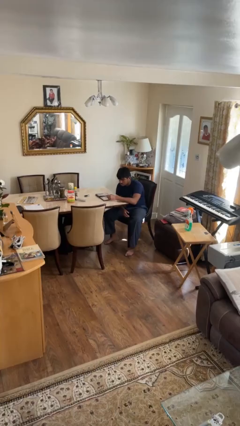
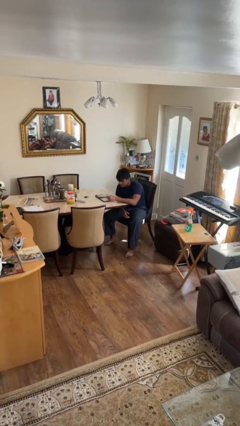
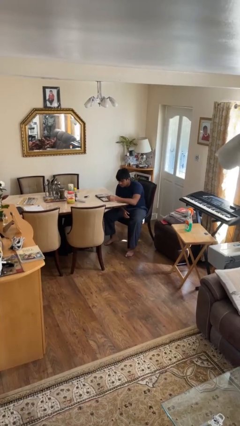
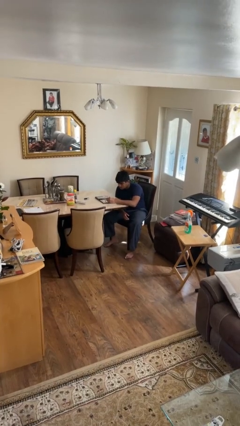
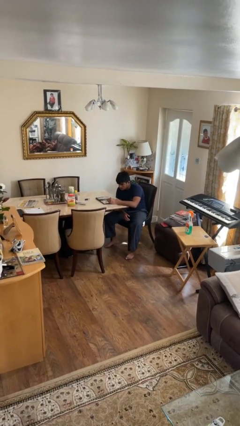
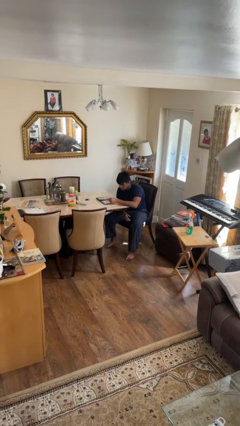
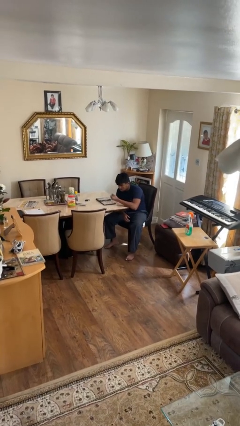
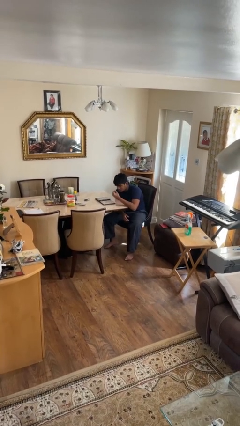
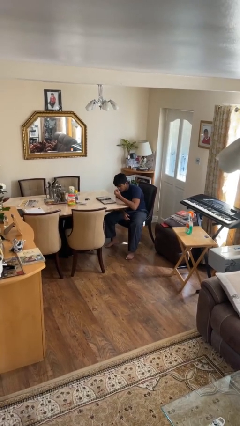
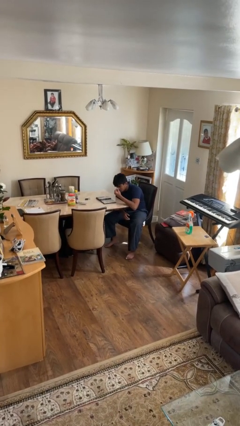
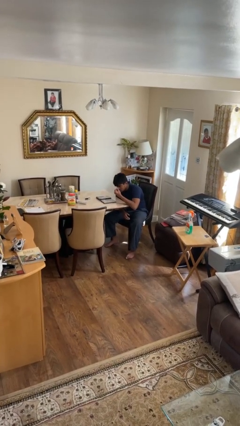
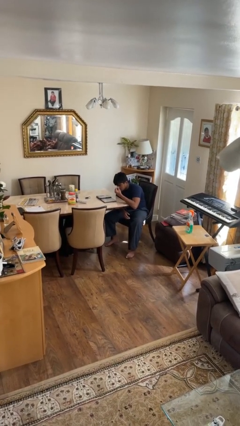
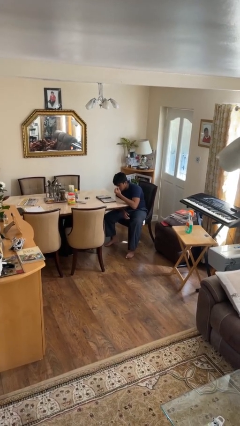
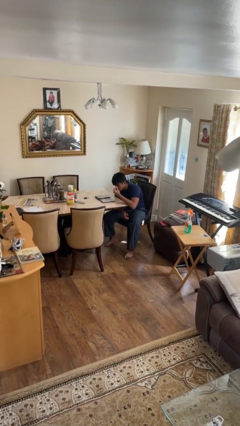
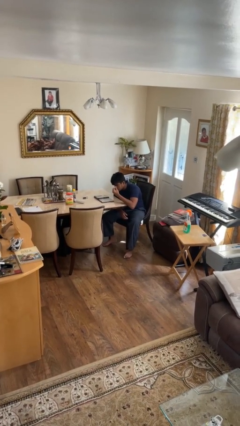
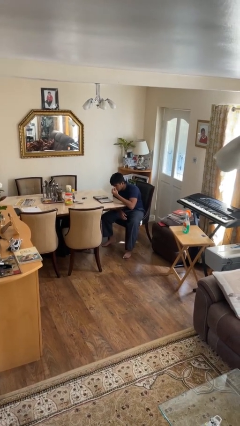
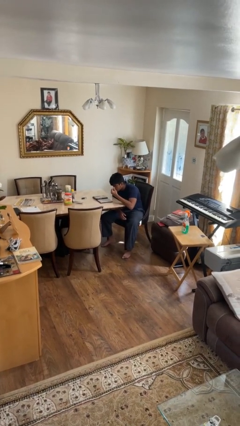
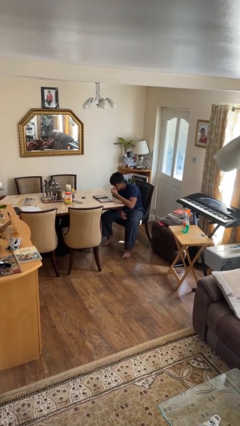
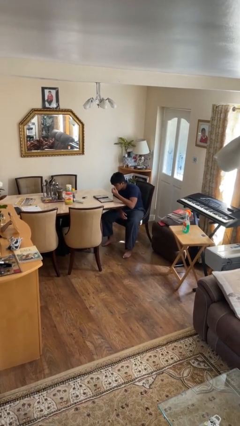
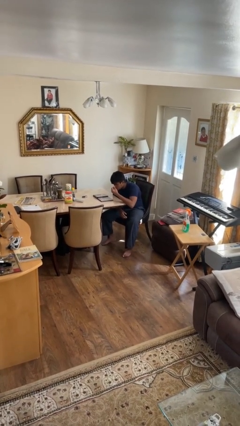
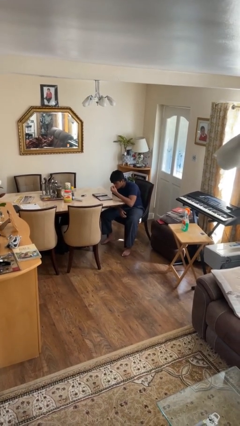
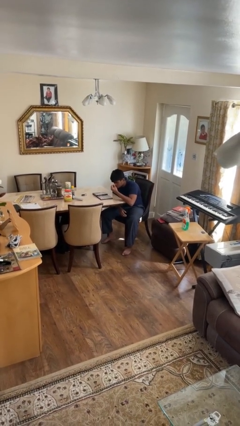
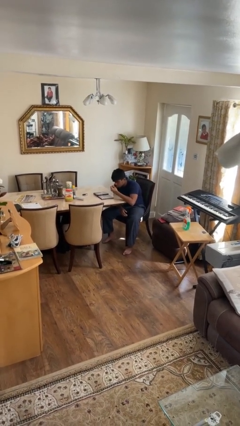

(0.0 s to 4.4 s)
person applies eye makeup

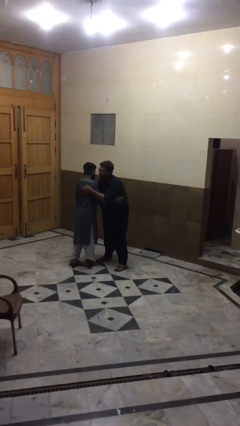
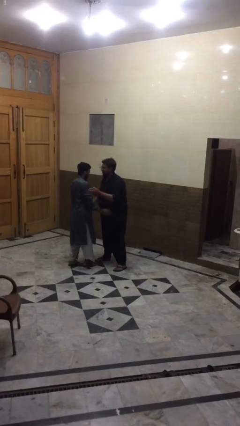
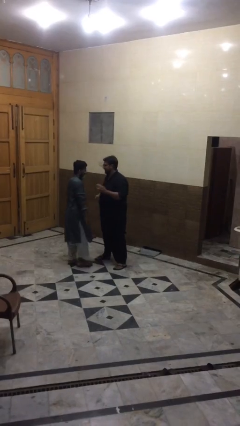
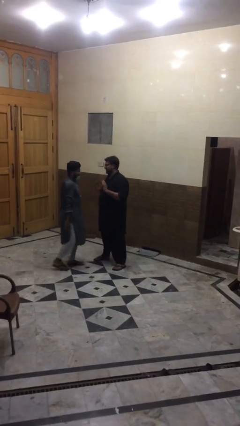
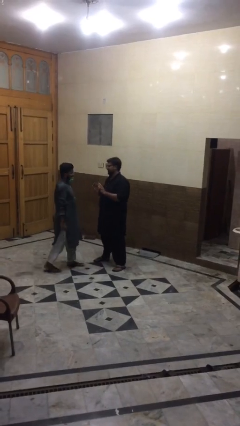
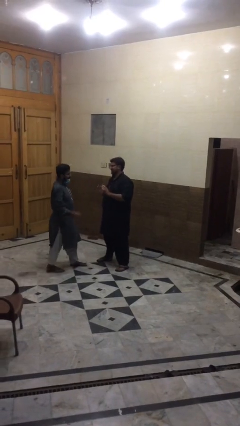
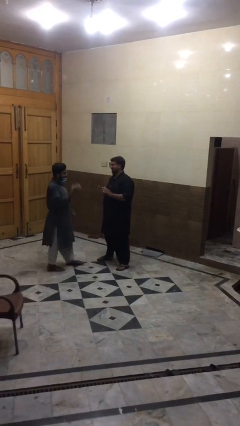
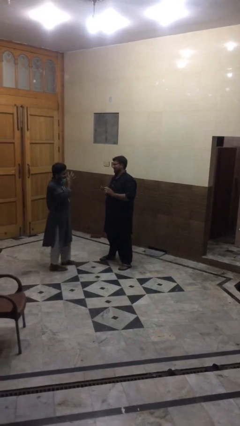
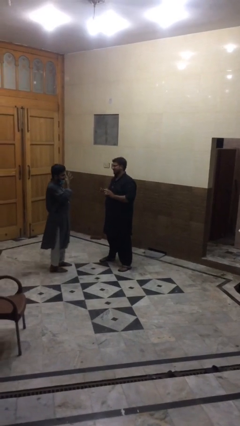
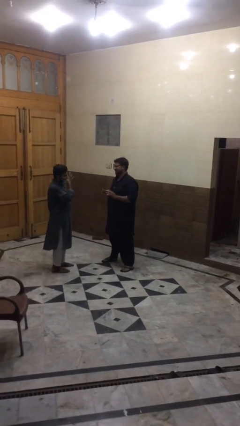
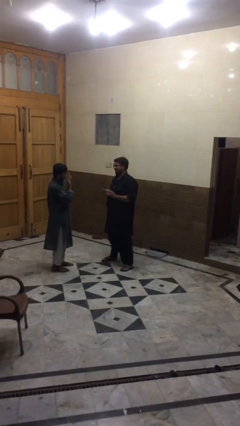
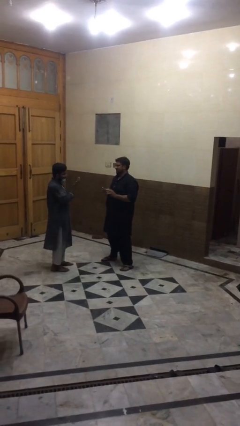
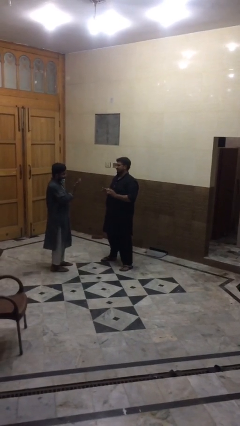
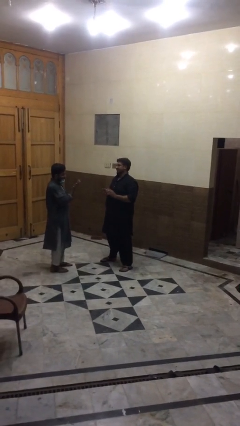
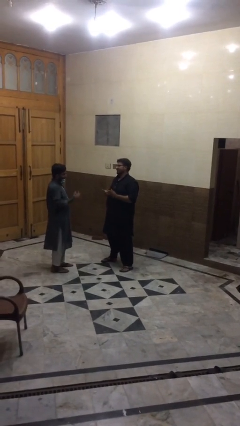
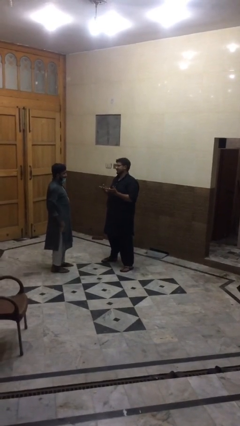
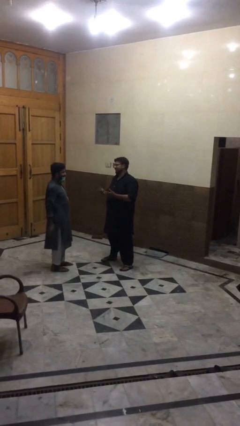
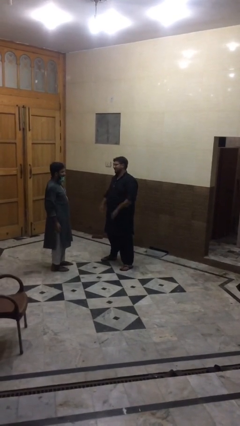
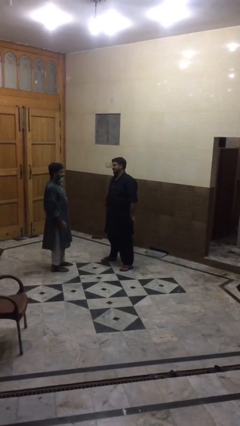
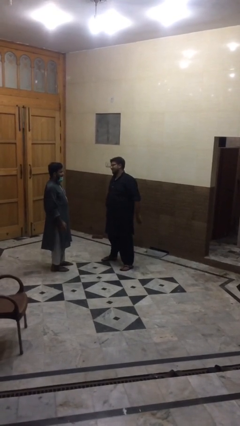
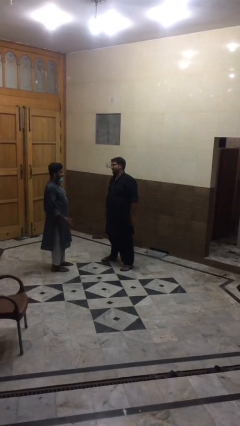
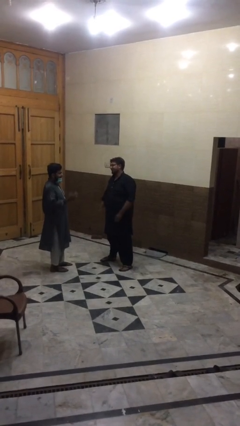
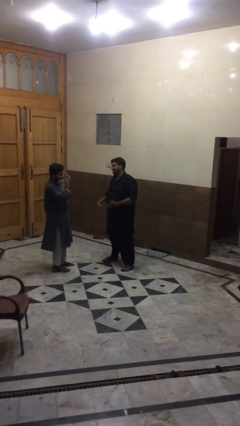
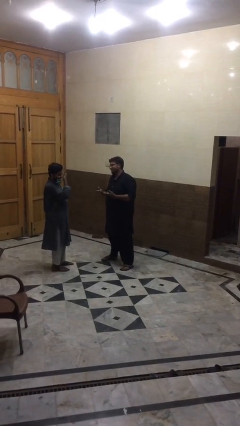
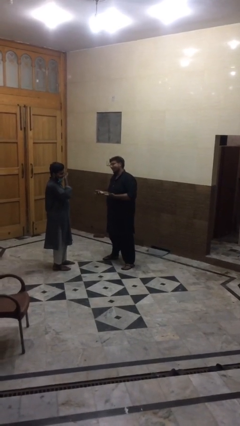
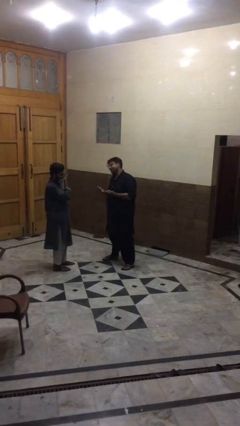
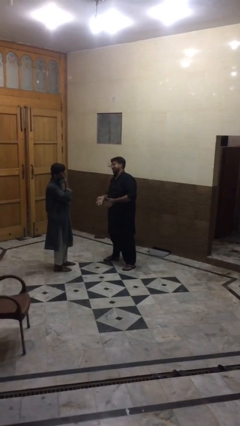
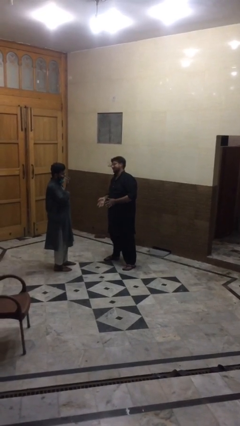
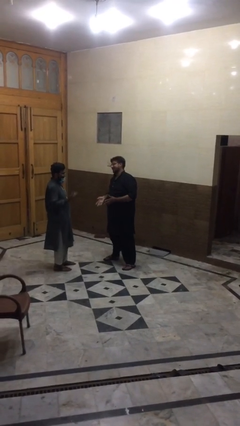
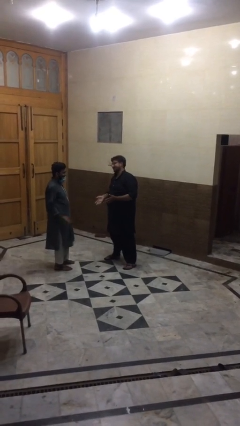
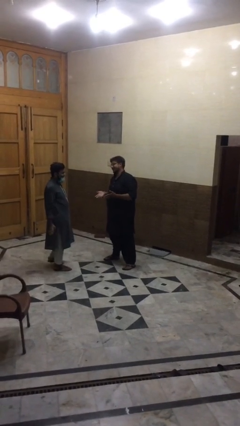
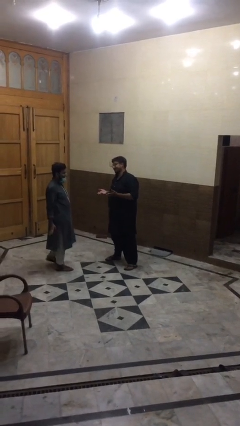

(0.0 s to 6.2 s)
person talks to person

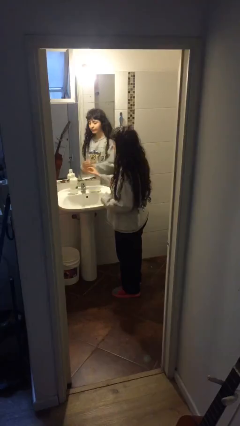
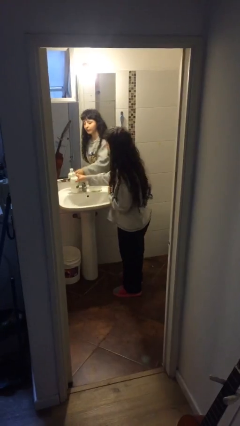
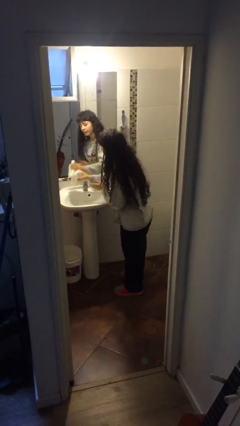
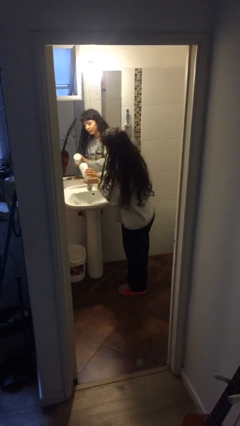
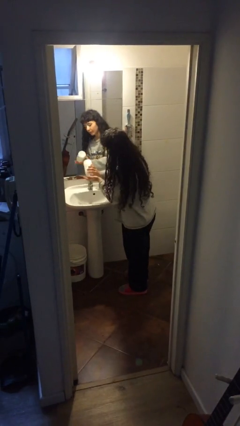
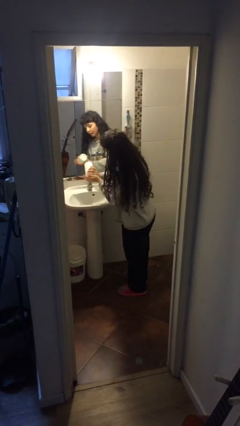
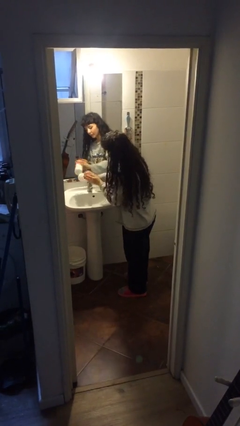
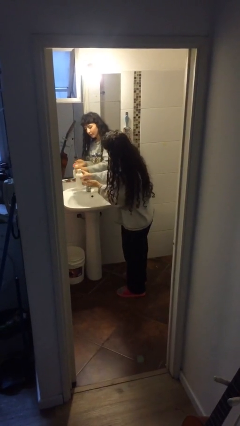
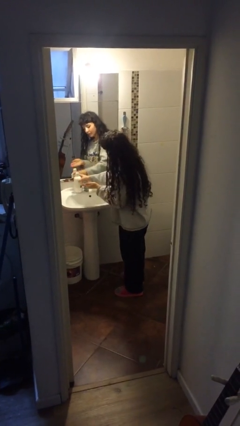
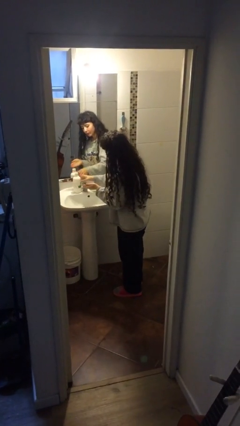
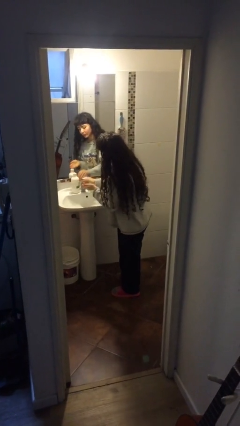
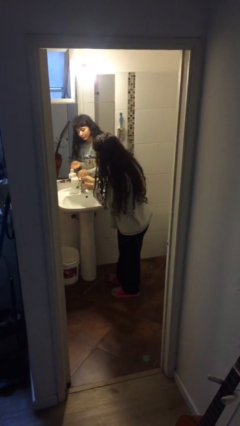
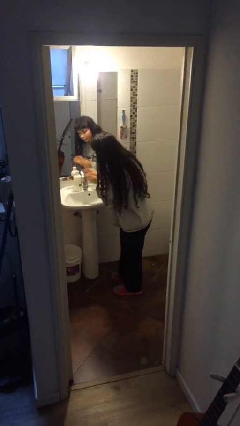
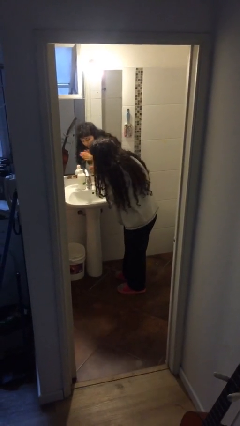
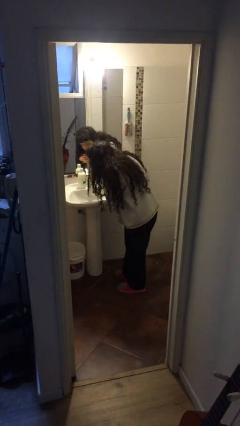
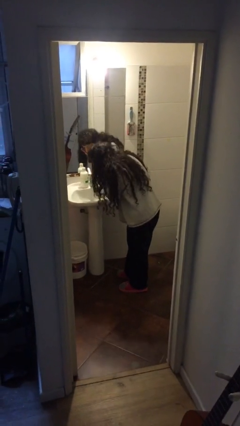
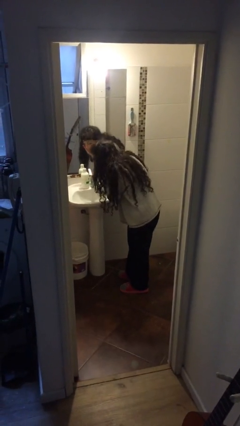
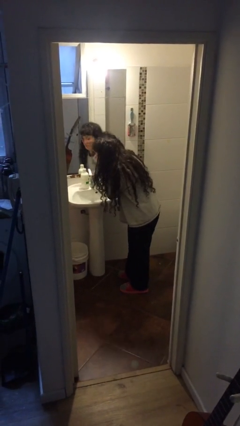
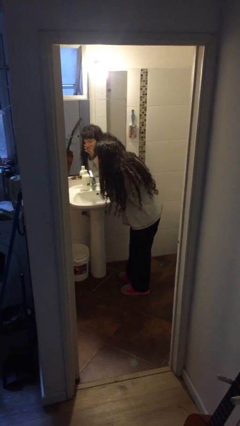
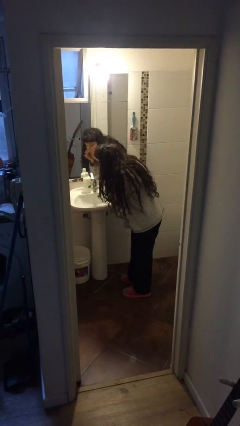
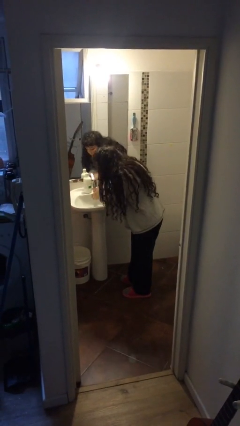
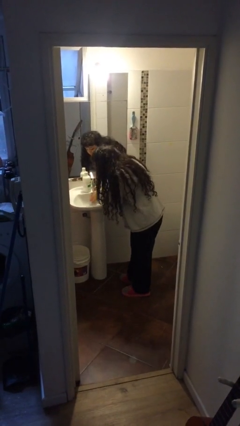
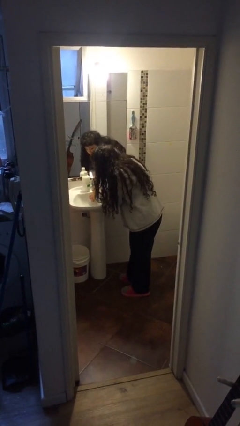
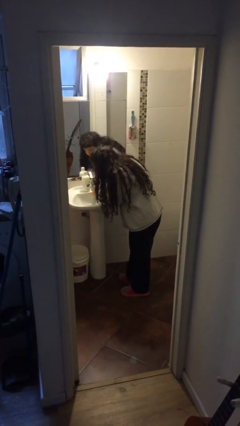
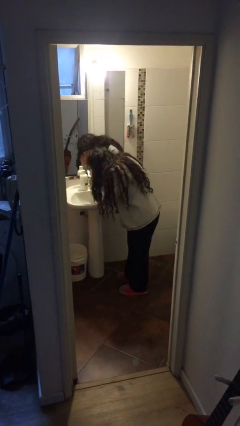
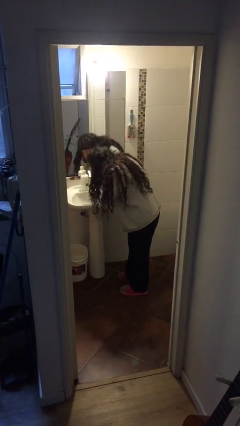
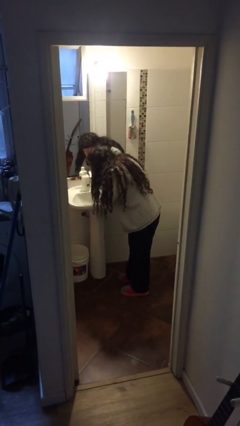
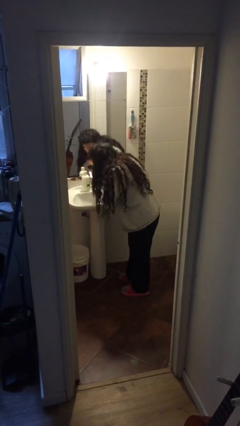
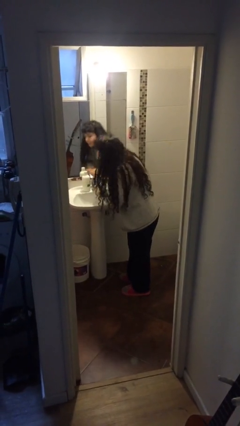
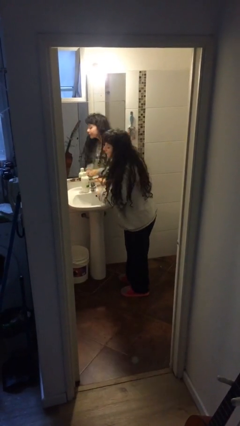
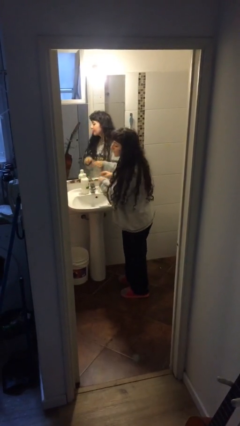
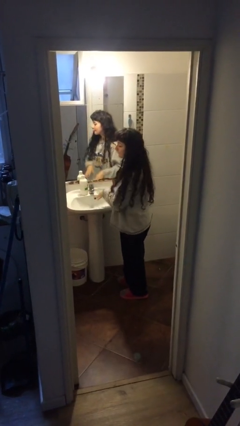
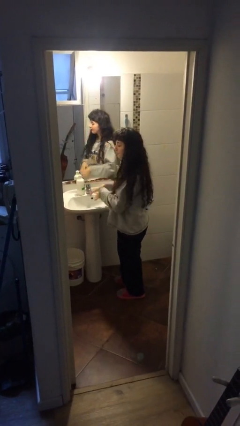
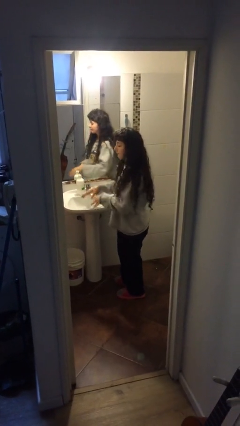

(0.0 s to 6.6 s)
person washes face

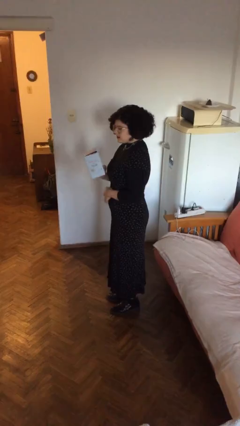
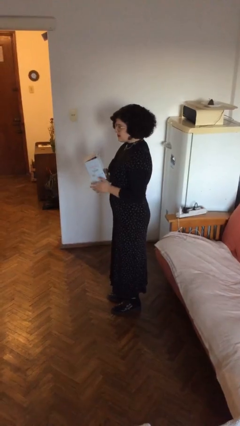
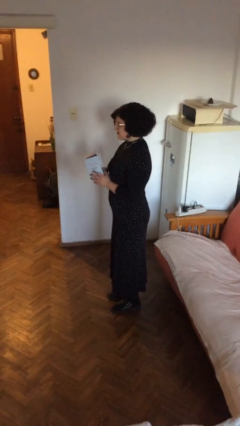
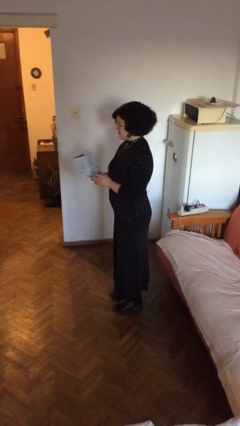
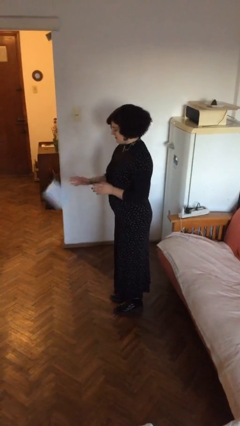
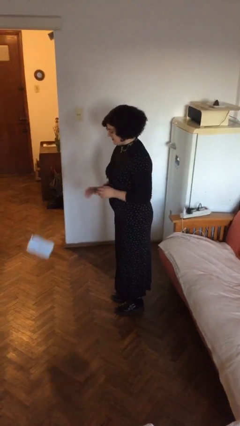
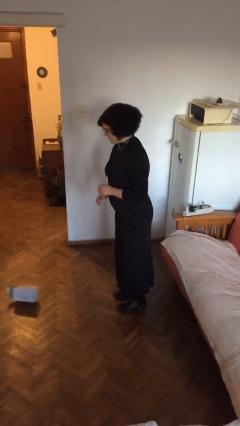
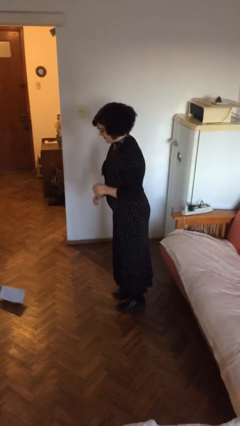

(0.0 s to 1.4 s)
person throws object to ground
